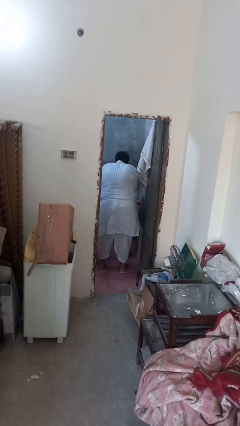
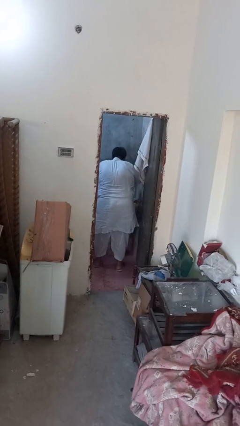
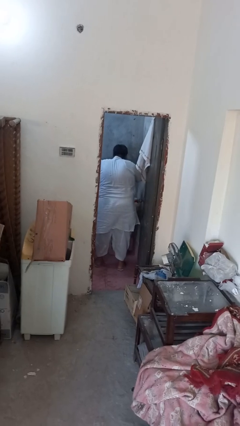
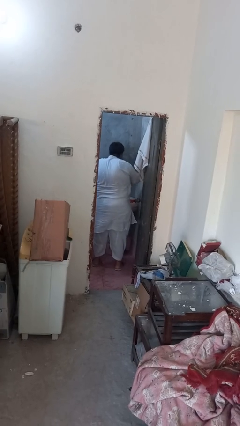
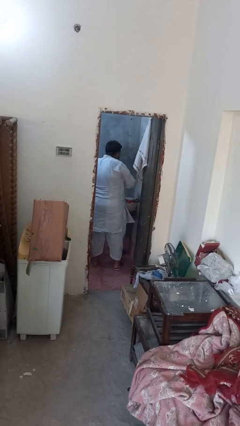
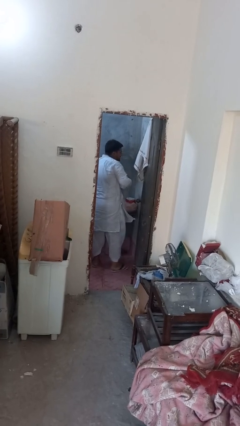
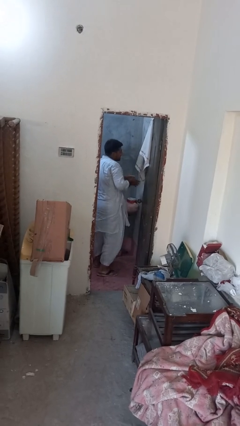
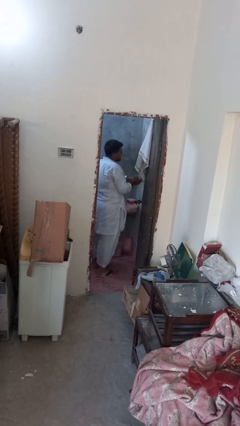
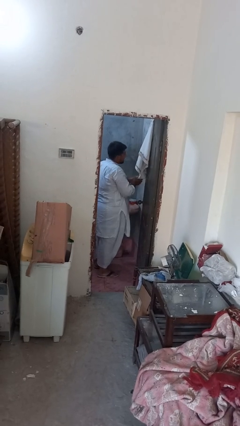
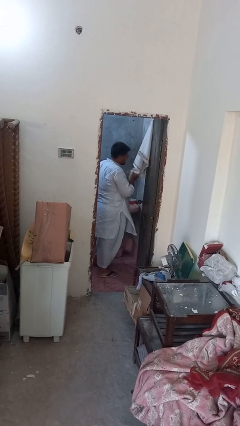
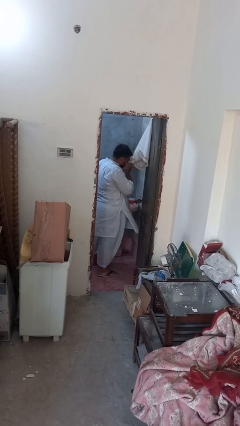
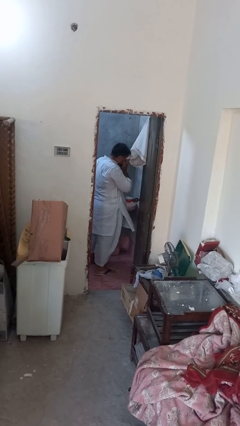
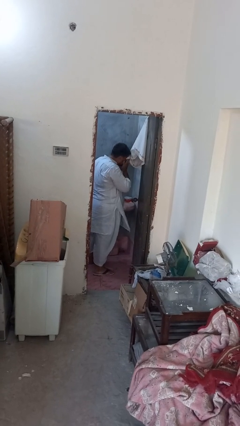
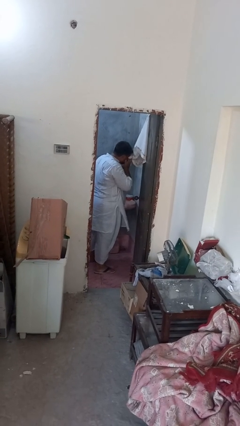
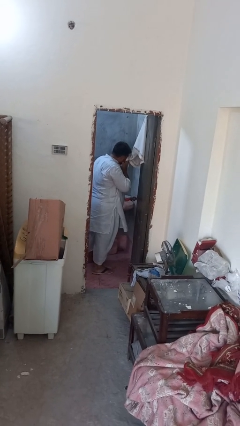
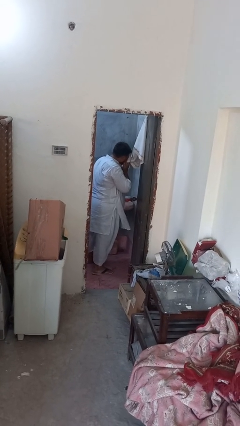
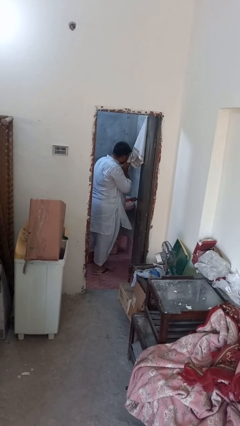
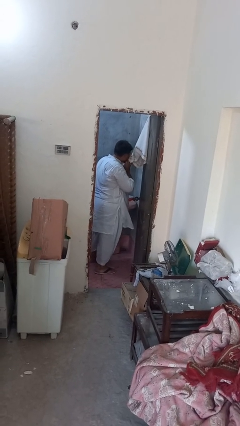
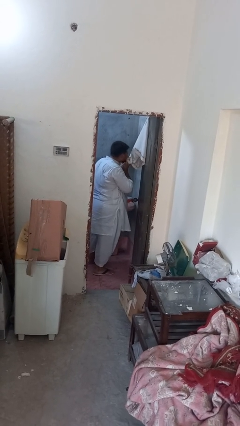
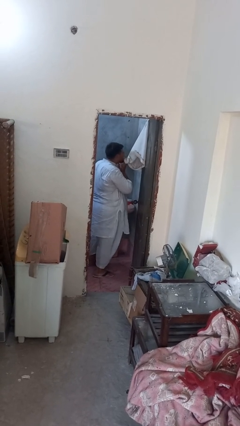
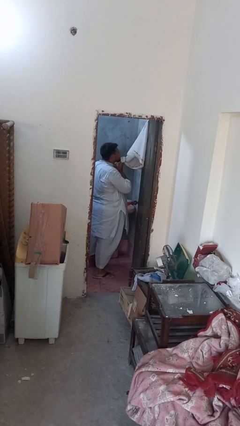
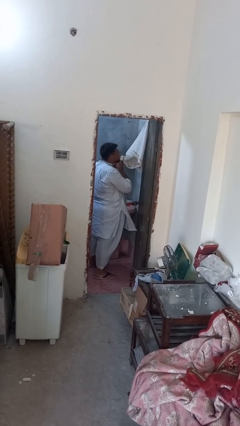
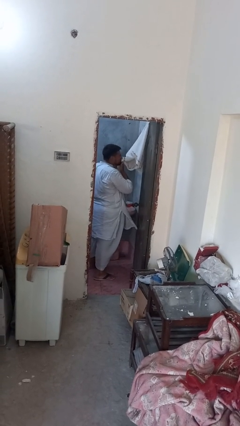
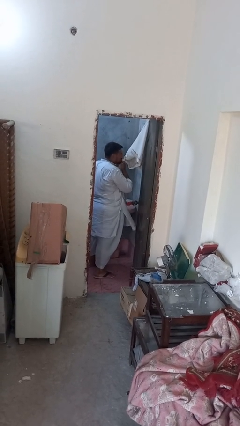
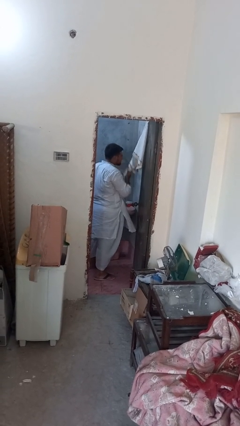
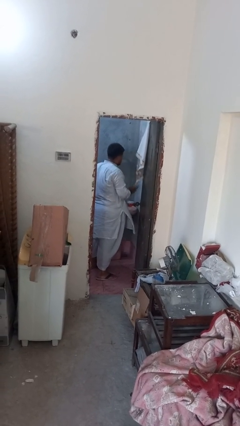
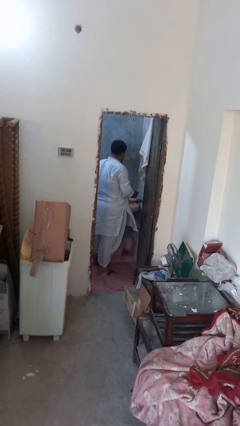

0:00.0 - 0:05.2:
person dries face with towel

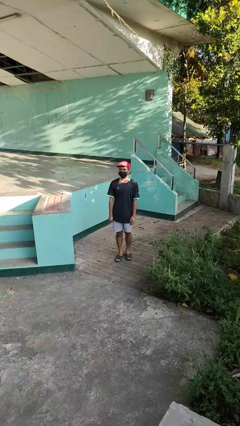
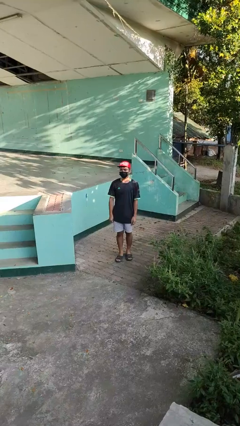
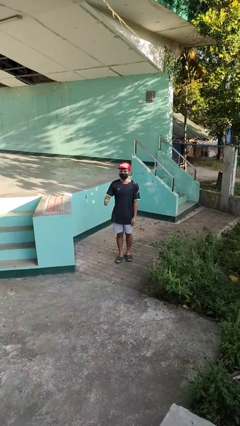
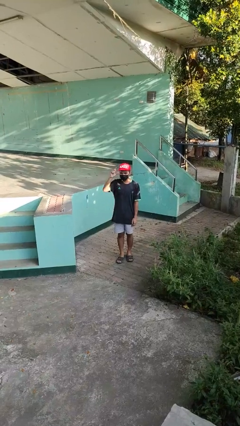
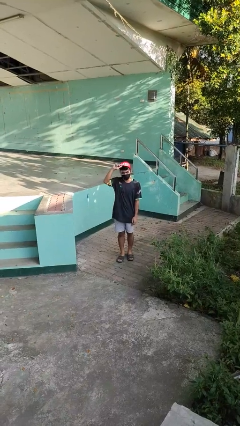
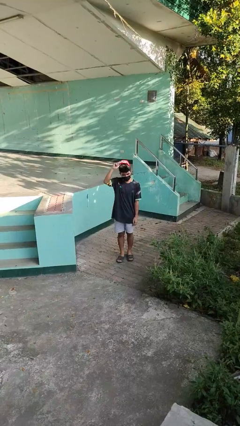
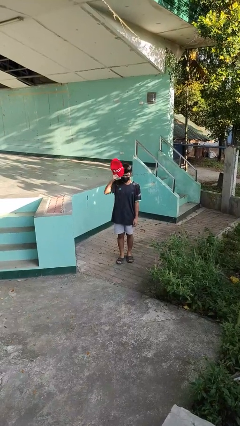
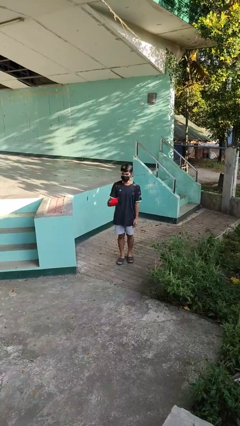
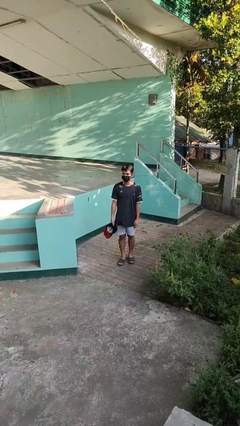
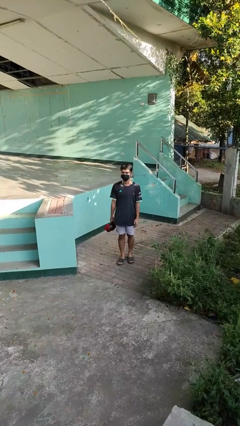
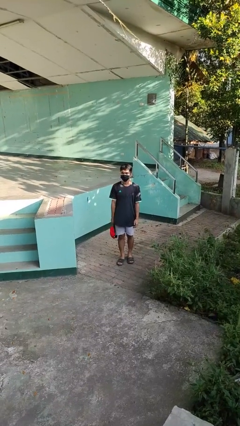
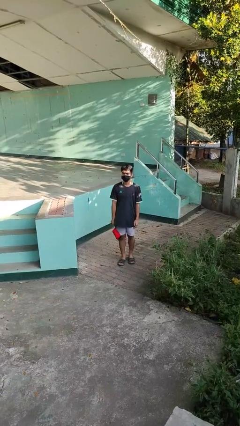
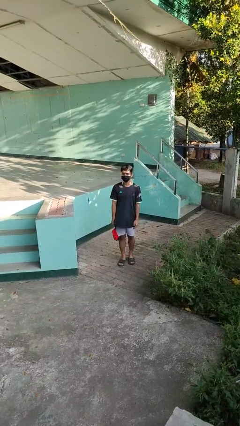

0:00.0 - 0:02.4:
person takes off hat

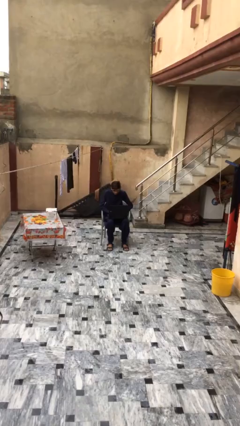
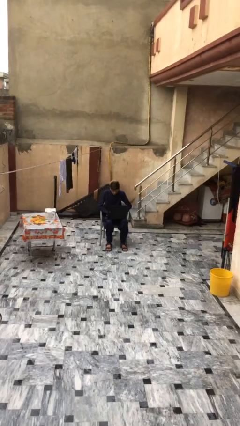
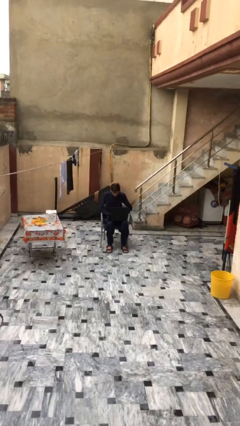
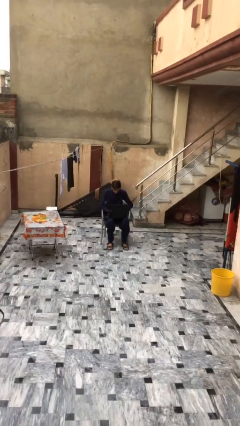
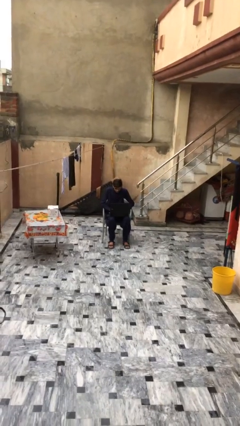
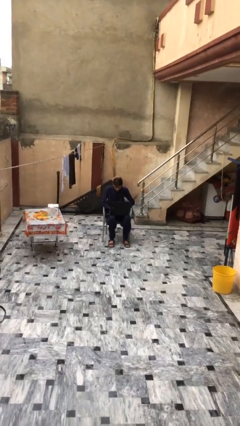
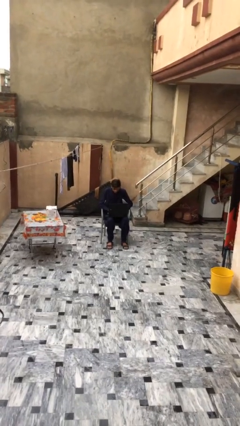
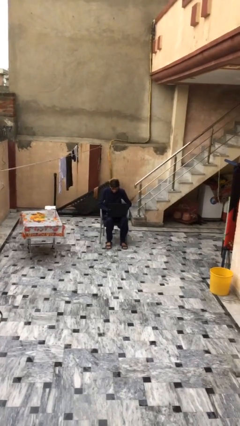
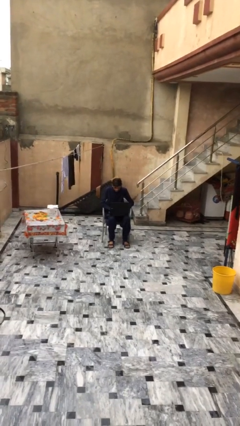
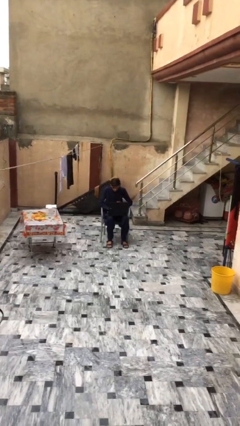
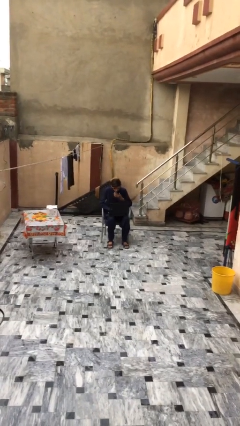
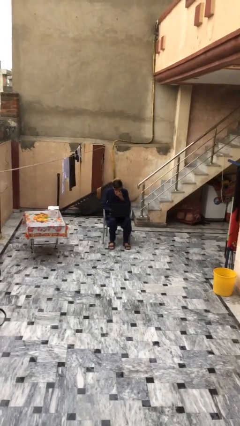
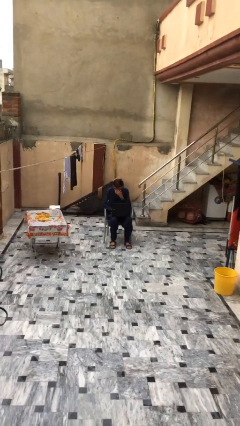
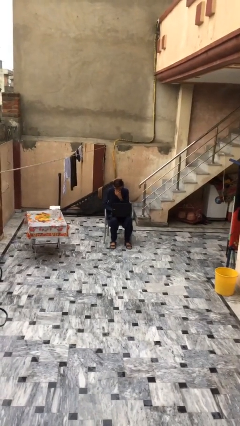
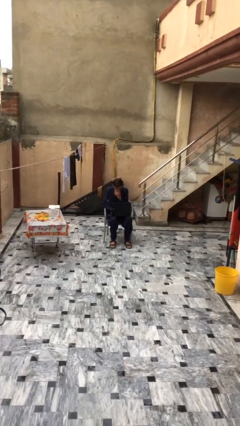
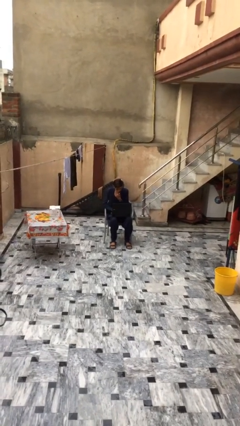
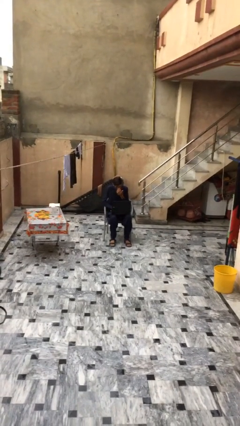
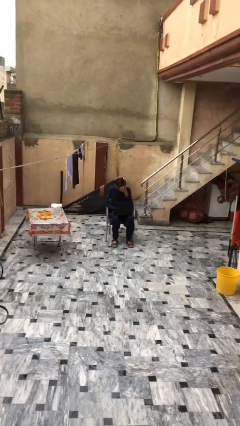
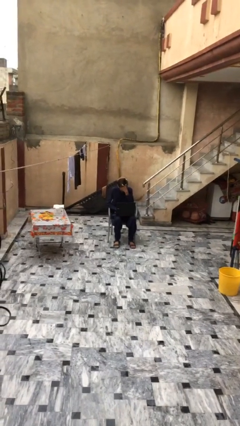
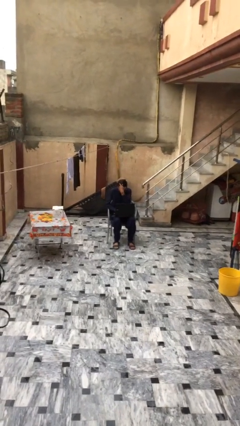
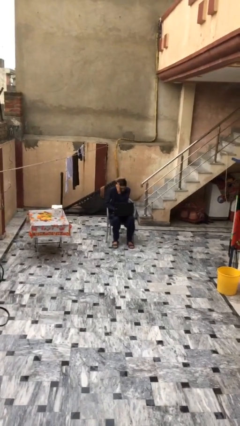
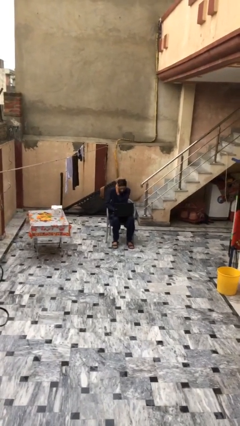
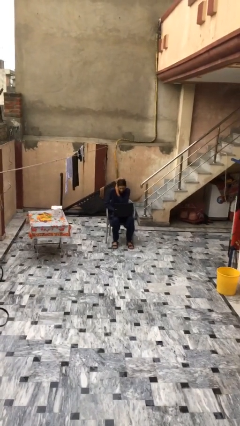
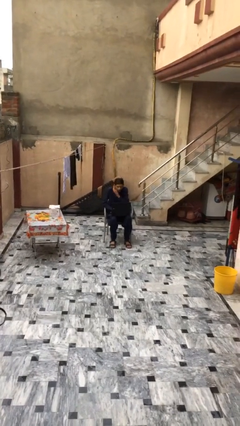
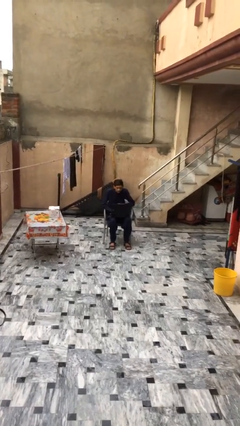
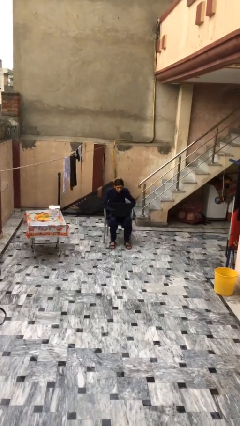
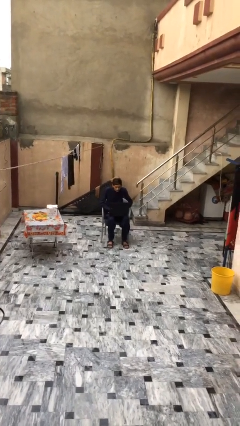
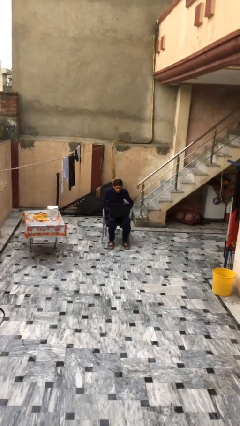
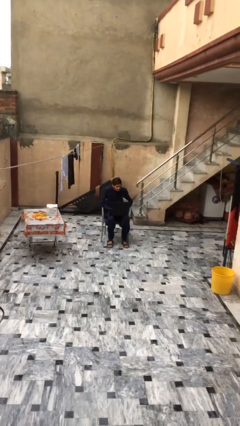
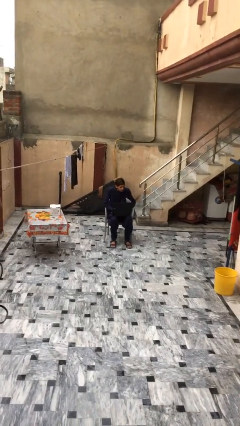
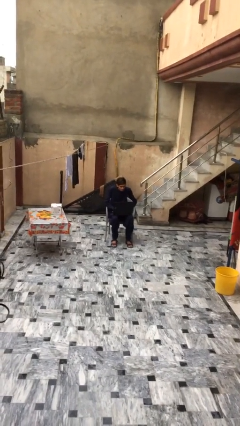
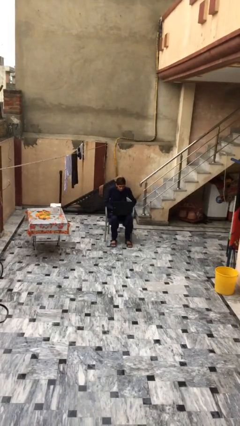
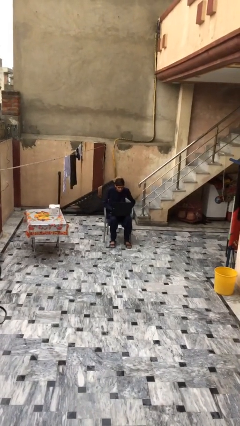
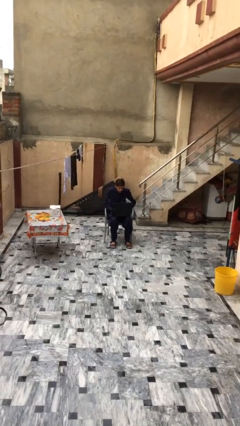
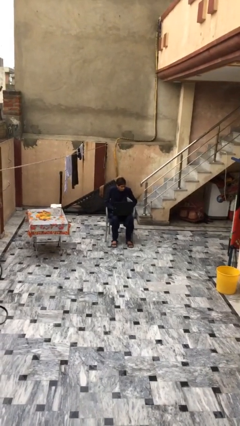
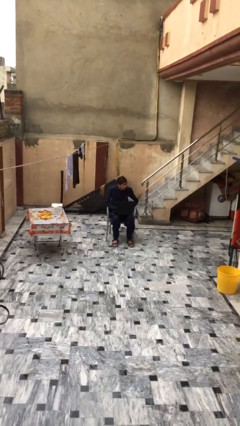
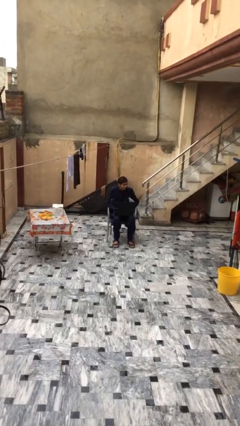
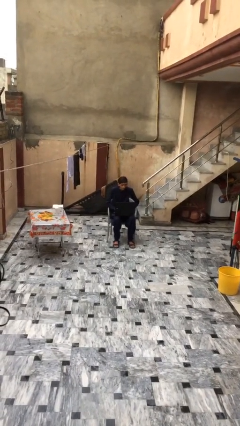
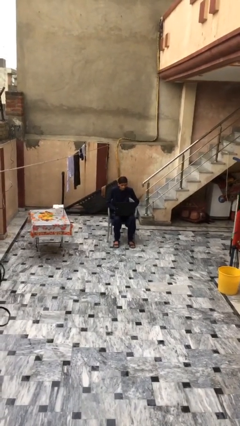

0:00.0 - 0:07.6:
person interacts with laptop

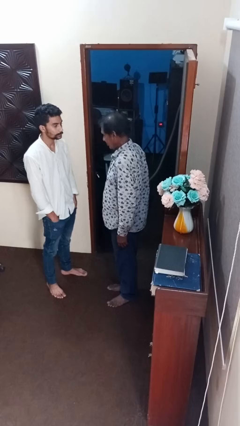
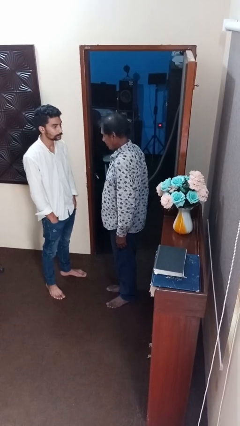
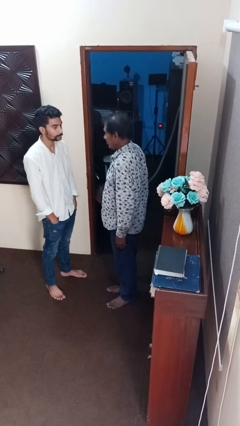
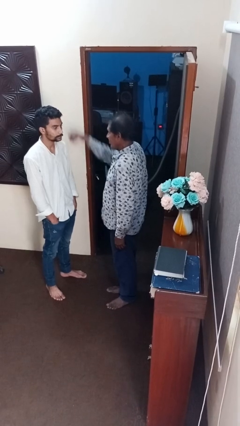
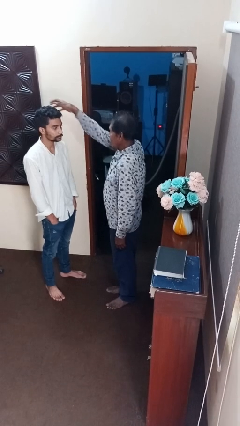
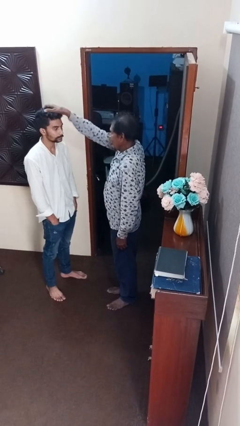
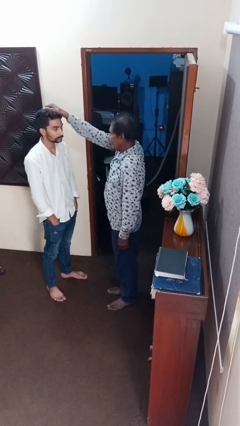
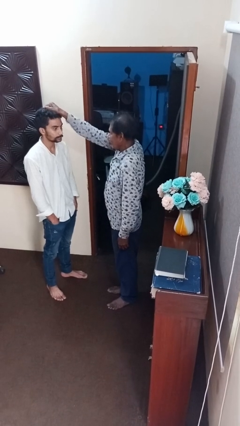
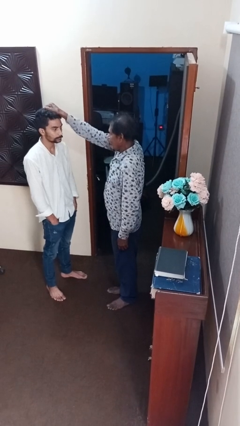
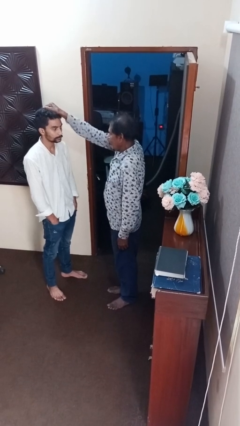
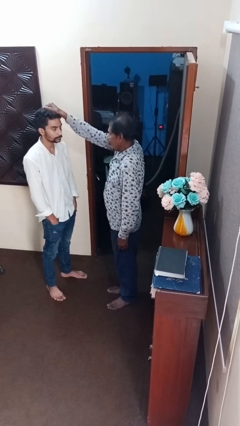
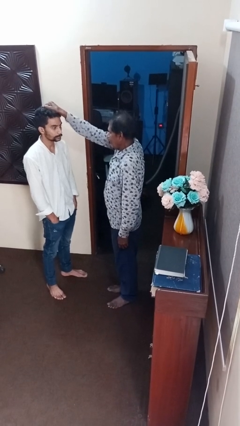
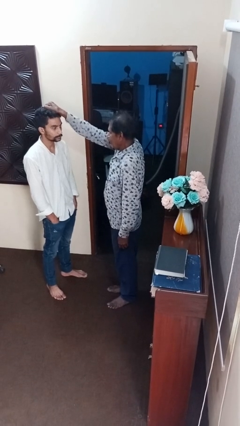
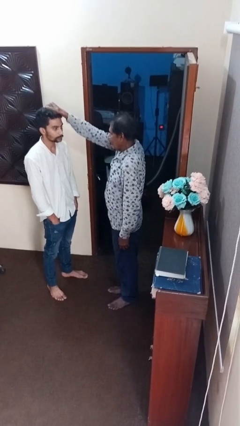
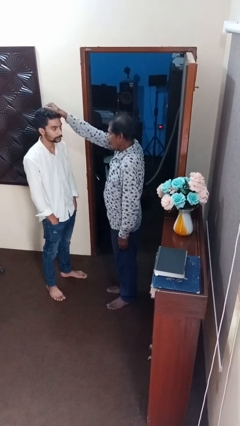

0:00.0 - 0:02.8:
person grabs person by hair
